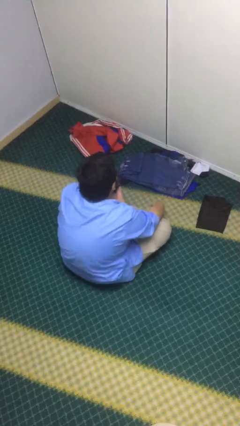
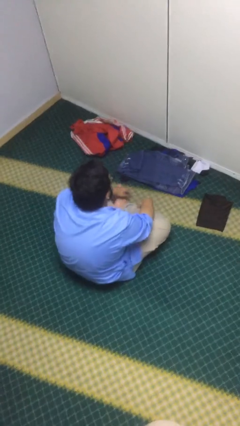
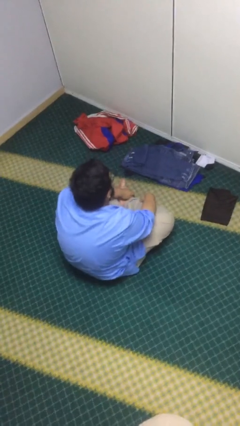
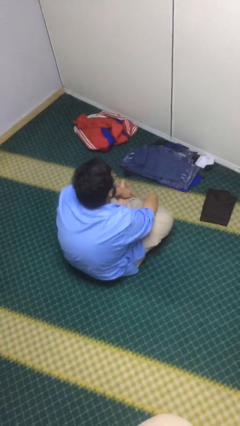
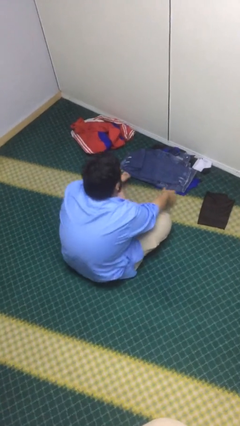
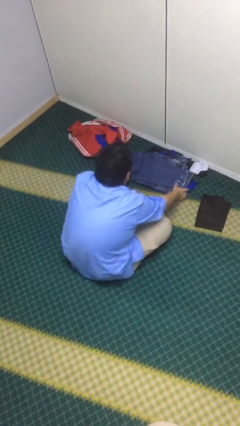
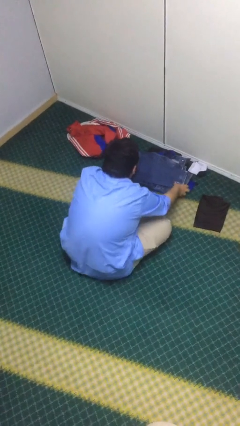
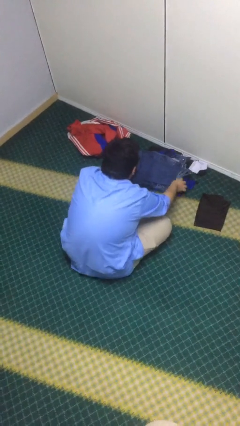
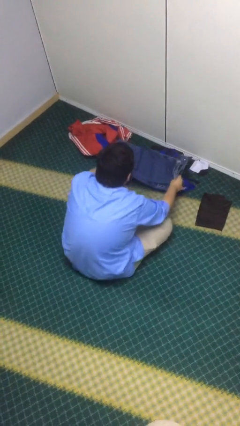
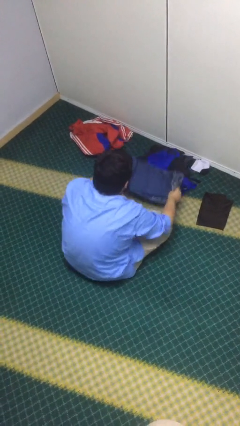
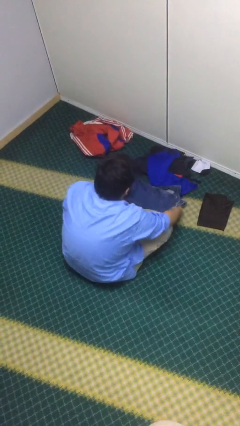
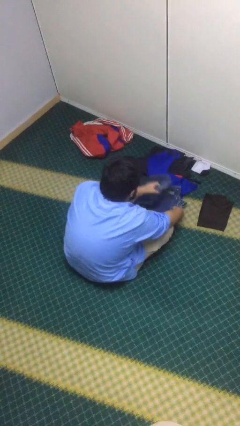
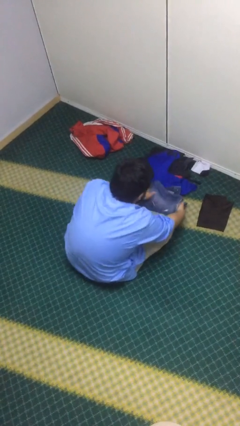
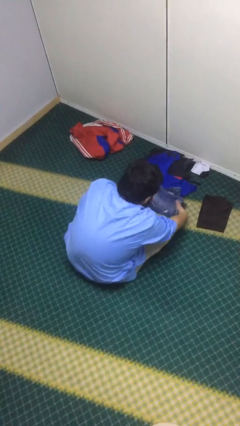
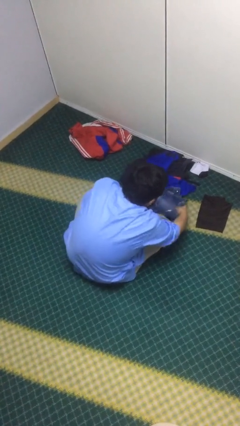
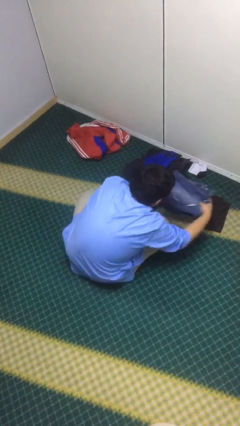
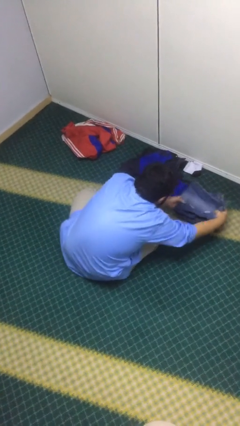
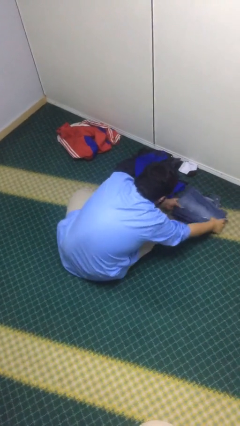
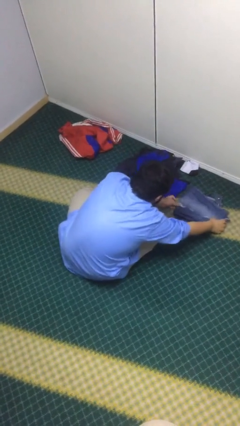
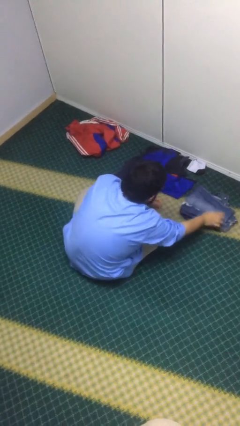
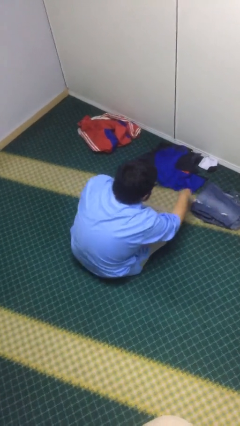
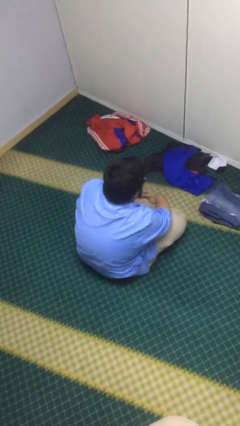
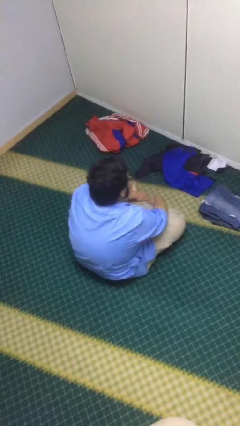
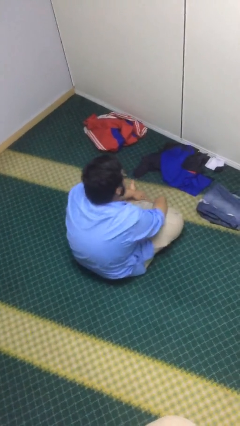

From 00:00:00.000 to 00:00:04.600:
person folds pants

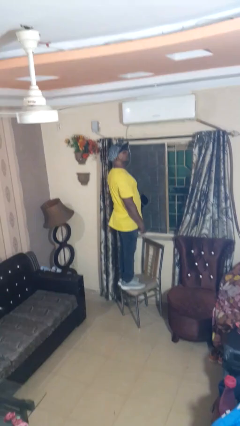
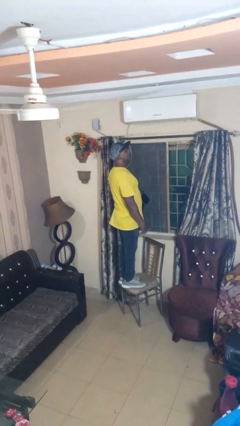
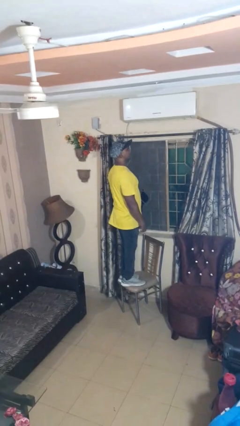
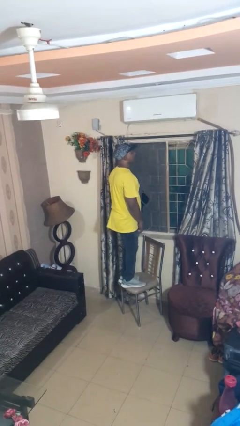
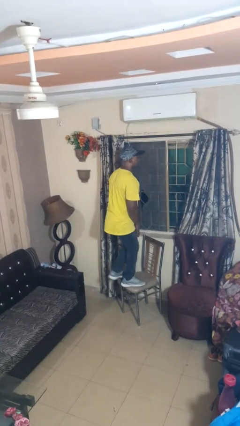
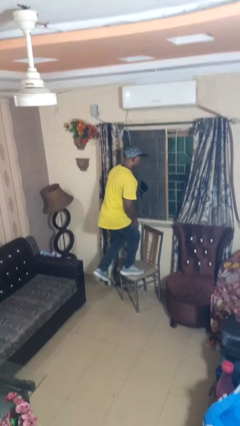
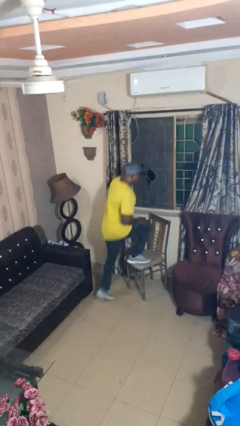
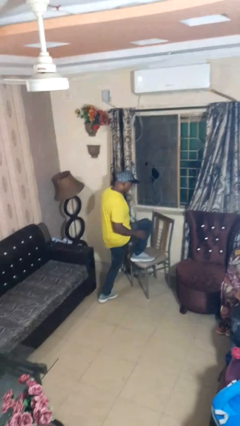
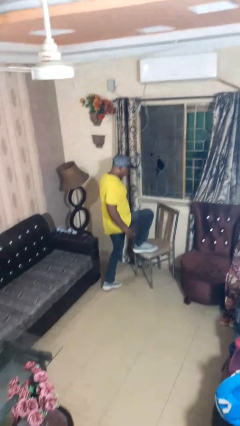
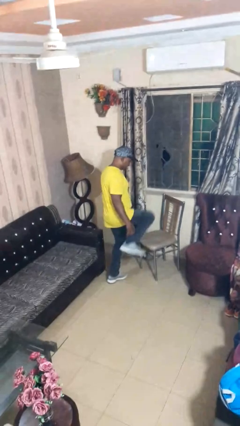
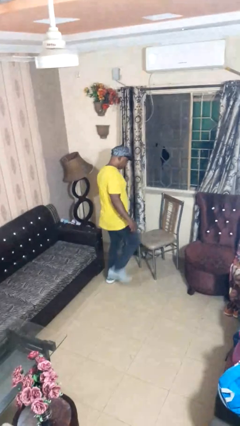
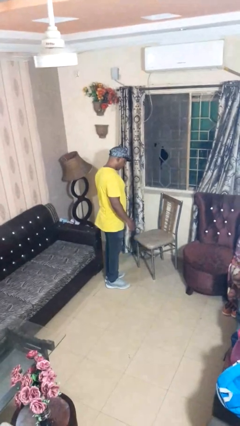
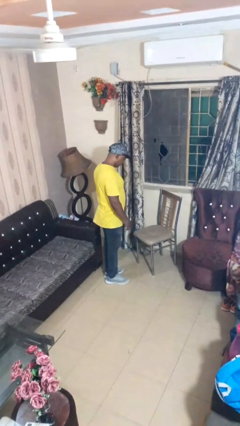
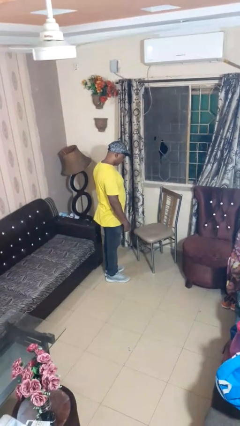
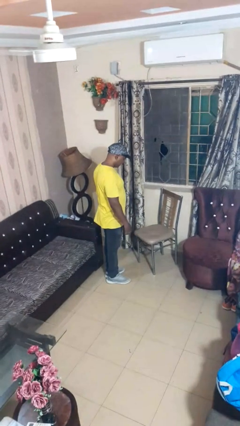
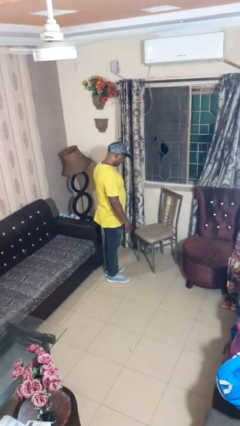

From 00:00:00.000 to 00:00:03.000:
person climbs off chair

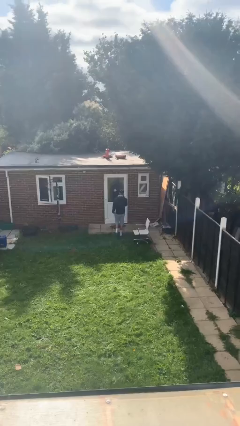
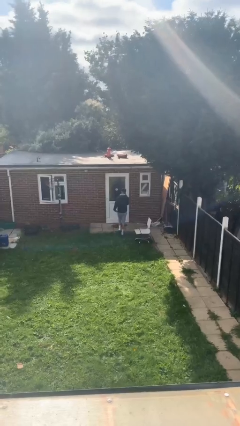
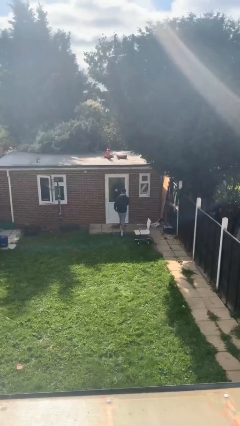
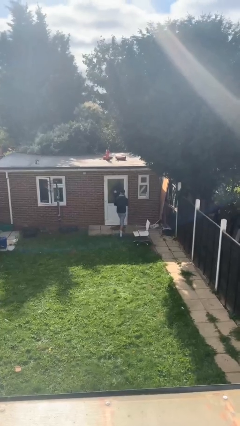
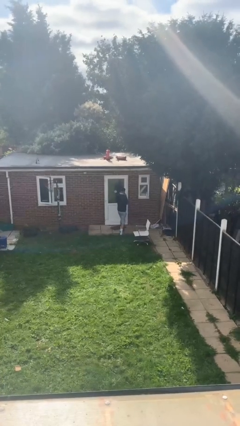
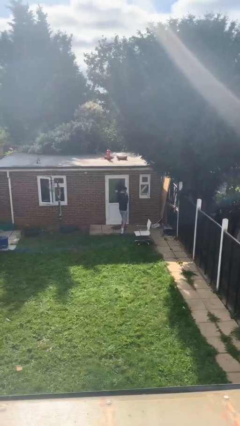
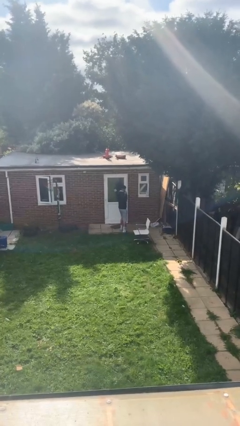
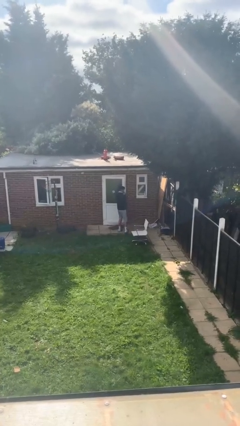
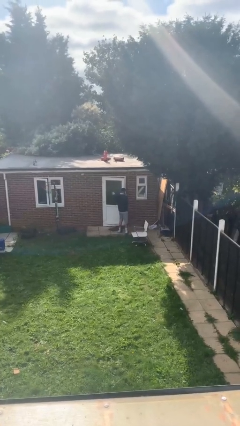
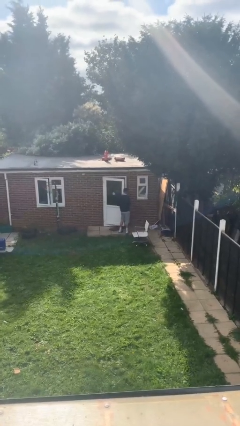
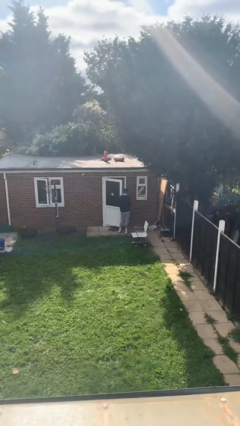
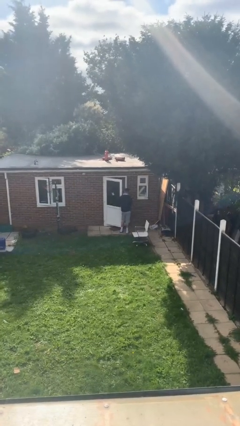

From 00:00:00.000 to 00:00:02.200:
person opens facility door

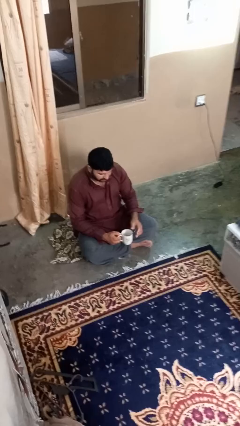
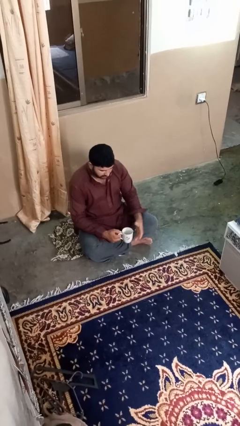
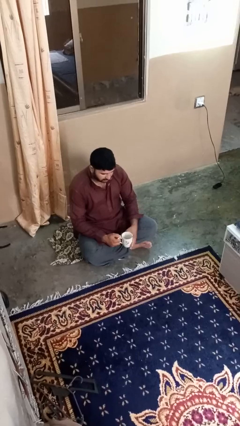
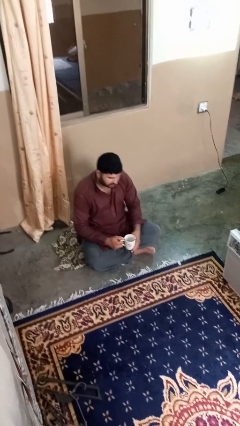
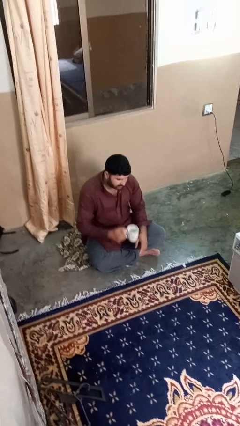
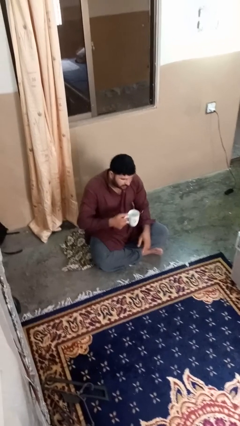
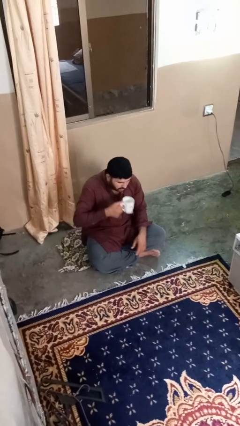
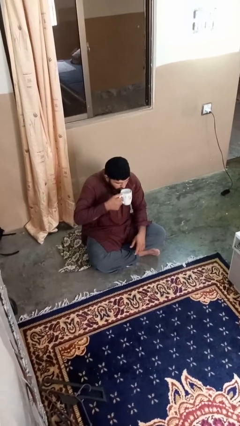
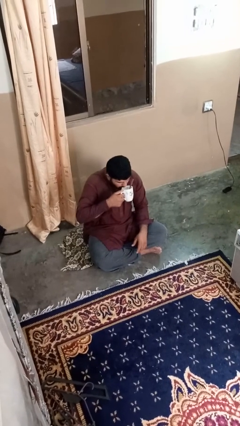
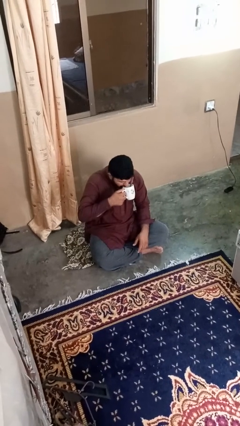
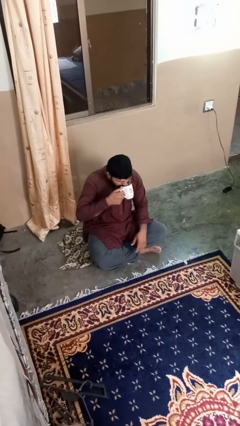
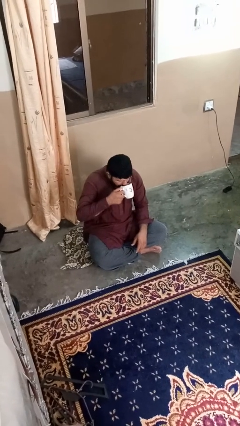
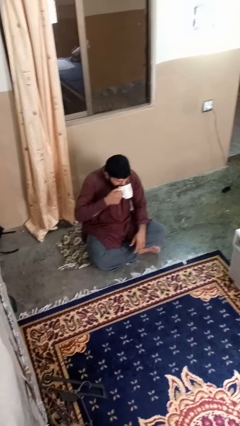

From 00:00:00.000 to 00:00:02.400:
person drinks from mug

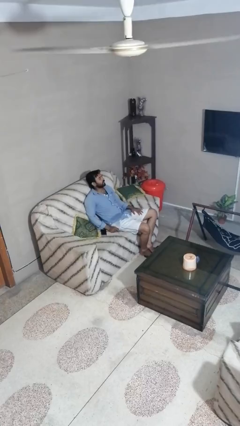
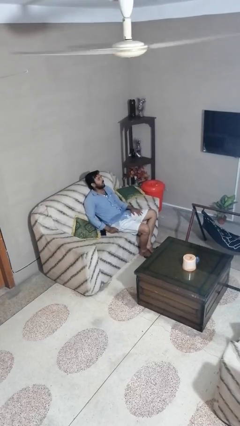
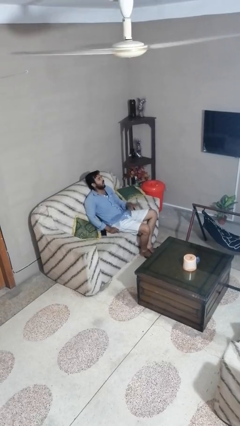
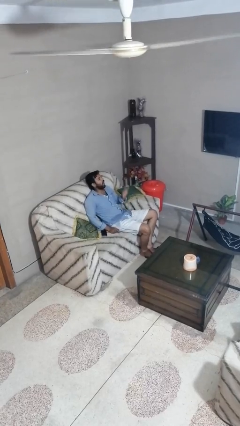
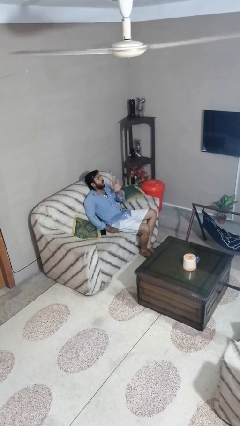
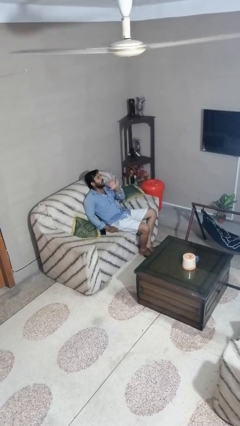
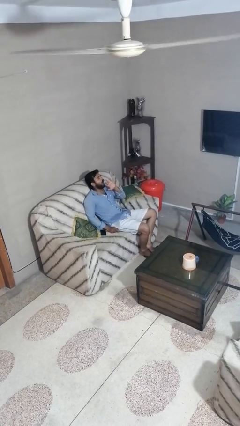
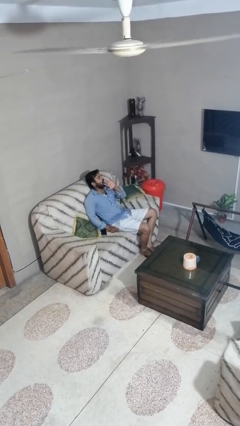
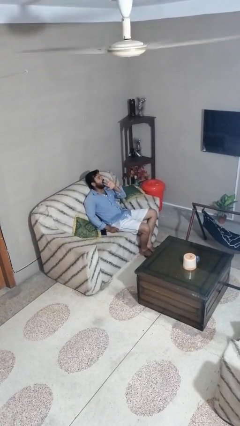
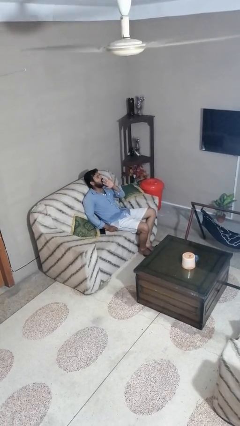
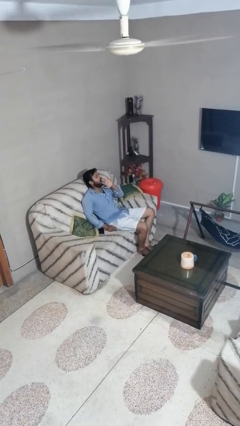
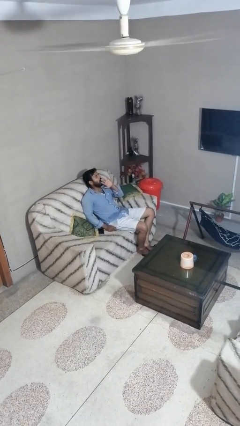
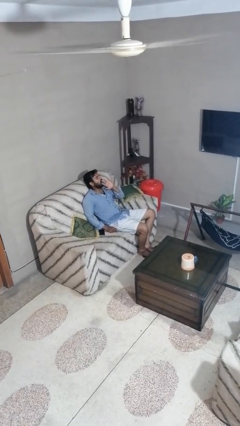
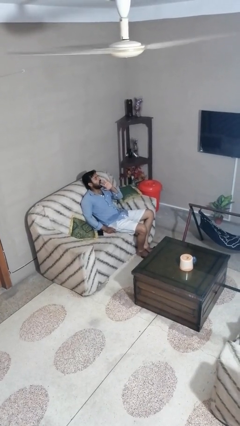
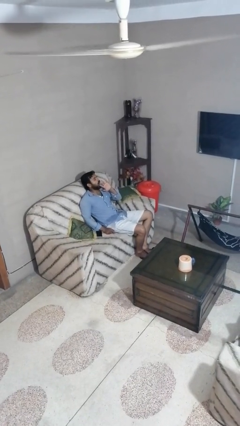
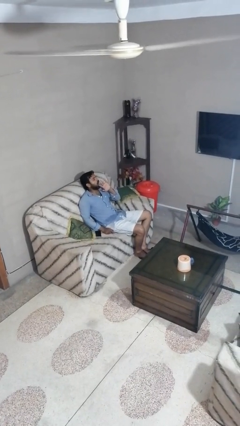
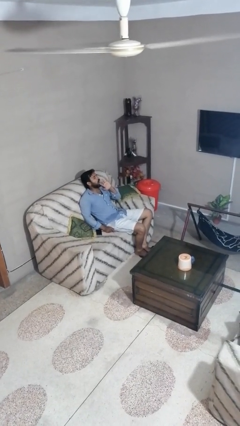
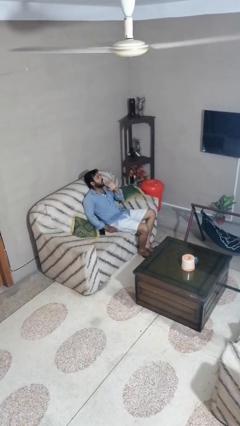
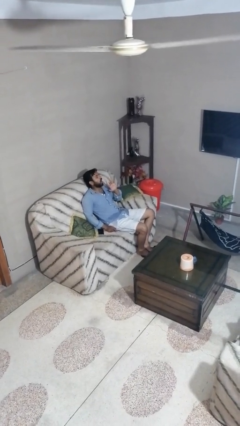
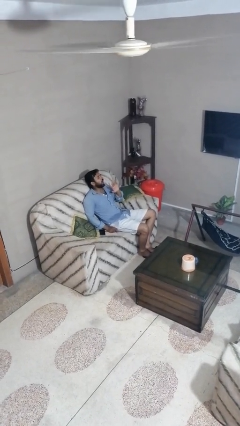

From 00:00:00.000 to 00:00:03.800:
person yawns

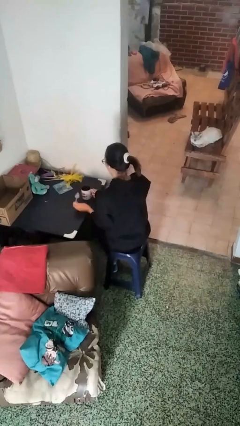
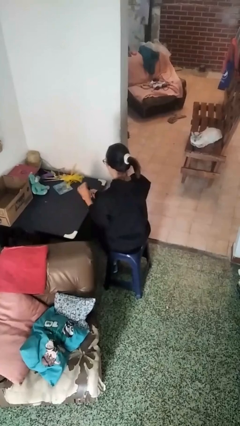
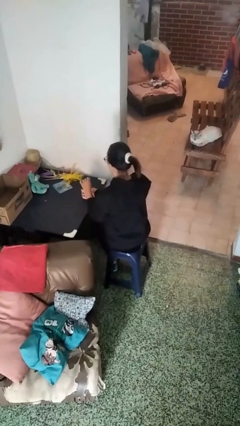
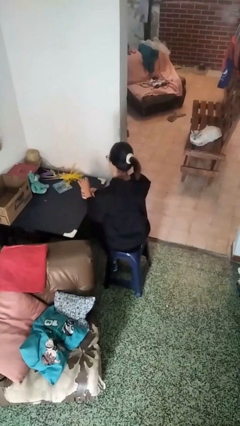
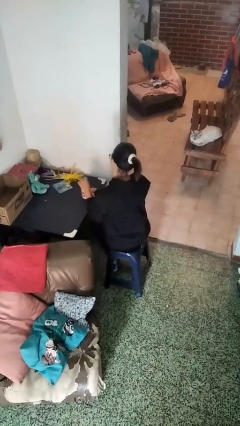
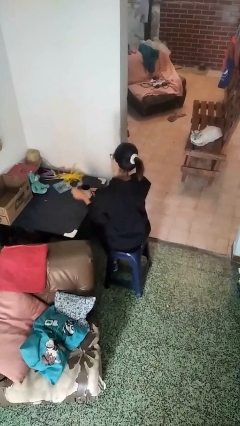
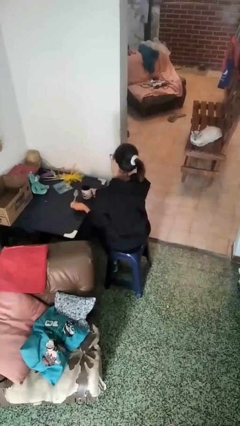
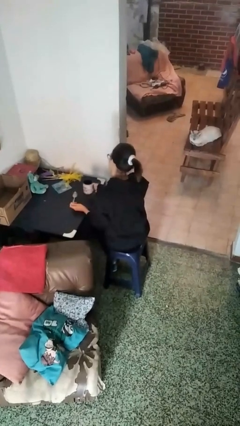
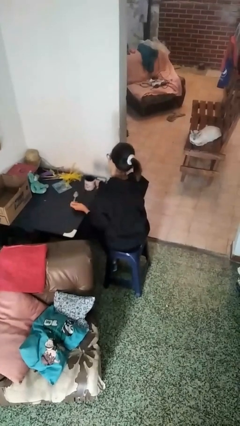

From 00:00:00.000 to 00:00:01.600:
person stirs mug
